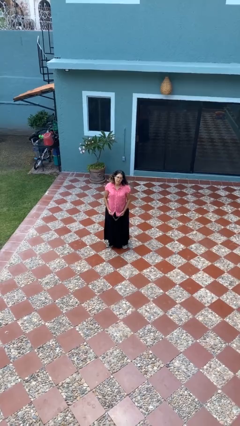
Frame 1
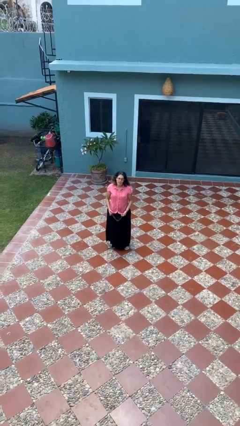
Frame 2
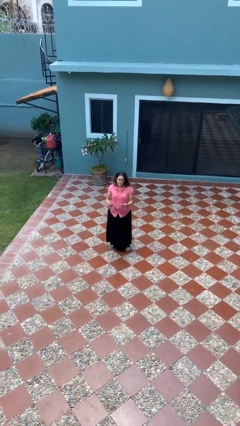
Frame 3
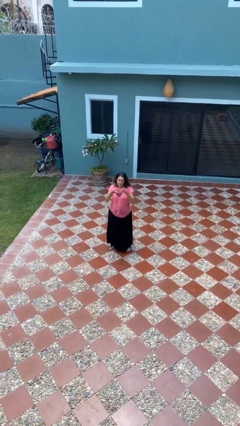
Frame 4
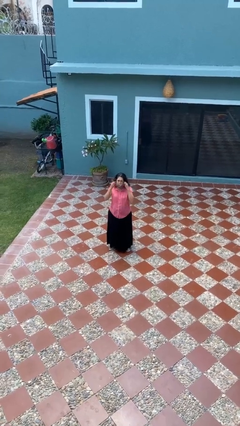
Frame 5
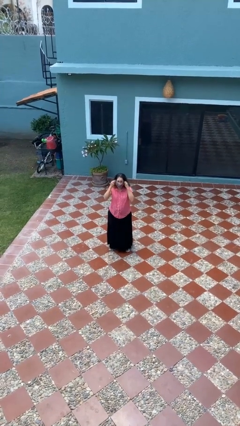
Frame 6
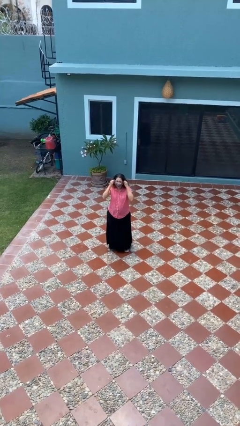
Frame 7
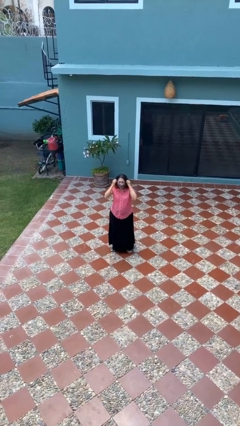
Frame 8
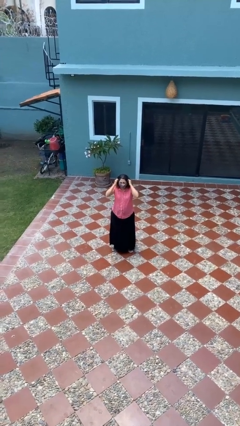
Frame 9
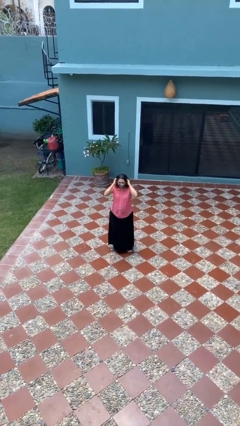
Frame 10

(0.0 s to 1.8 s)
person puts on facemask

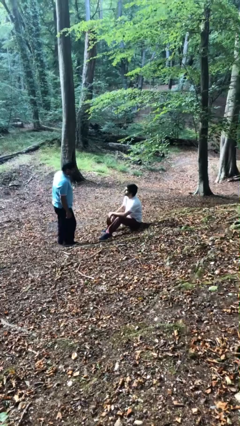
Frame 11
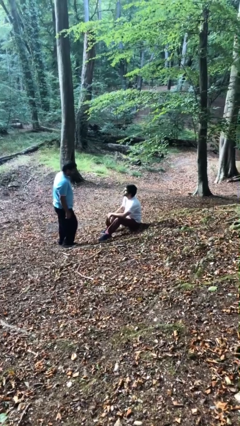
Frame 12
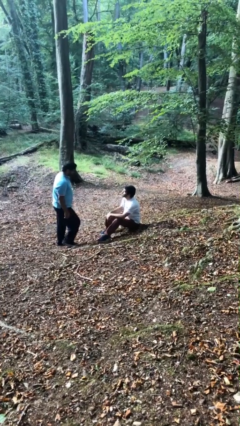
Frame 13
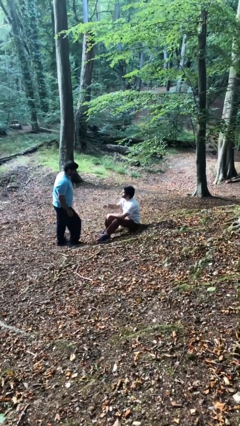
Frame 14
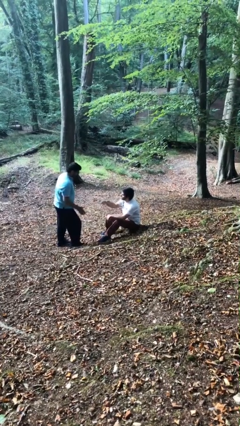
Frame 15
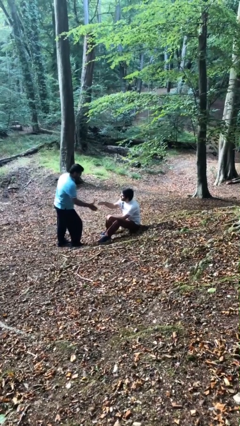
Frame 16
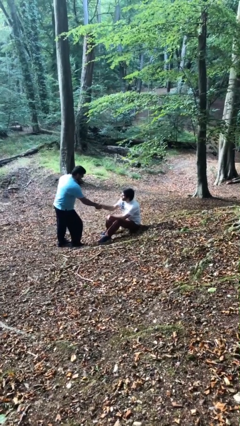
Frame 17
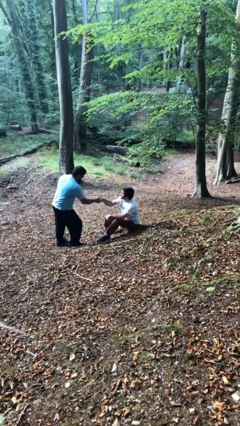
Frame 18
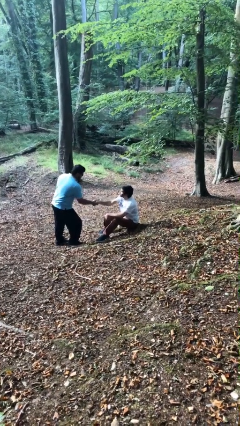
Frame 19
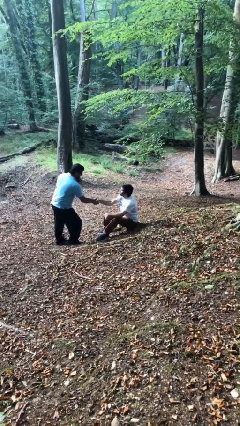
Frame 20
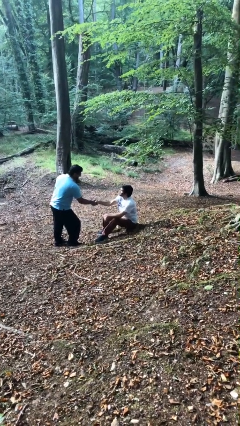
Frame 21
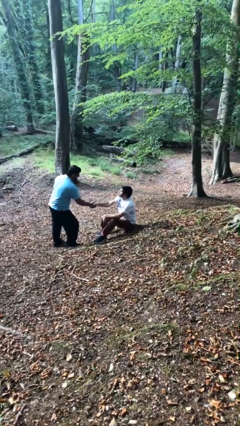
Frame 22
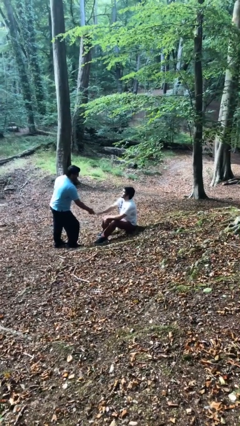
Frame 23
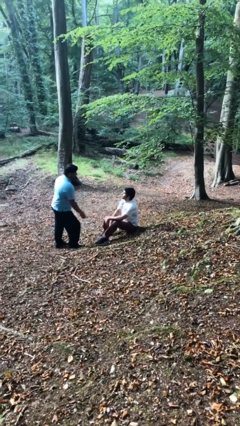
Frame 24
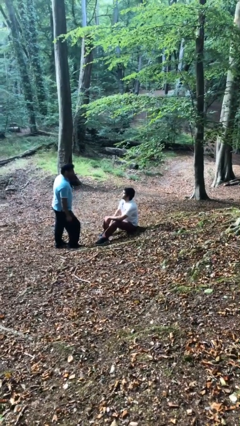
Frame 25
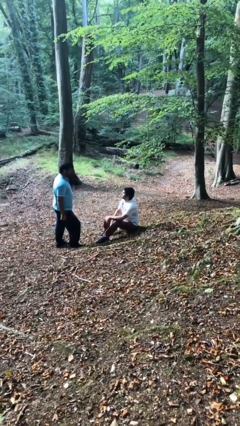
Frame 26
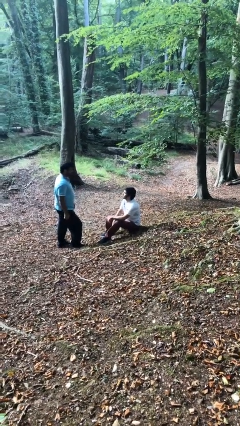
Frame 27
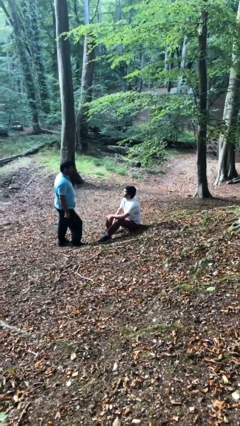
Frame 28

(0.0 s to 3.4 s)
person shakes hand

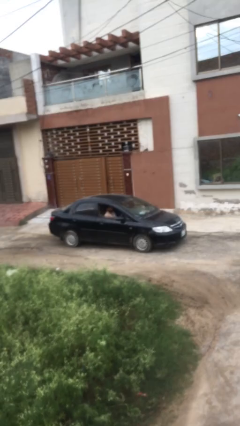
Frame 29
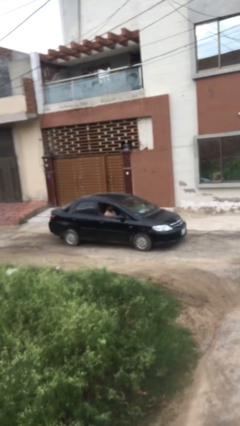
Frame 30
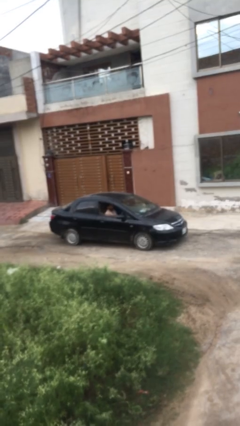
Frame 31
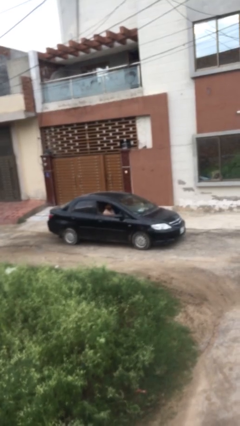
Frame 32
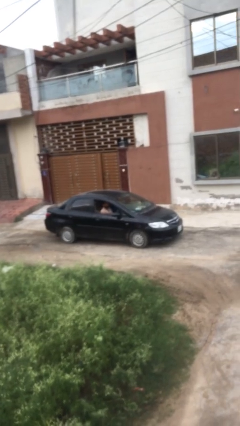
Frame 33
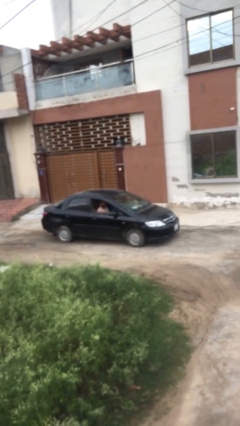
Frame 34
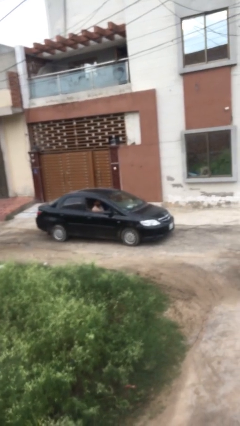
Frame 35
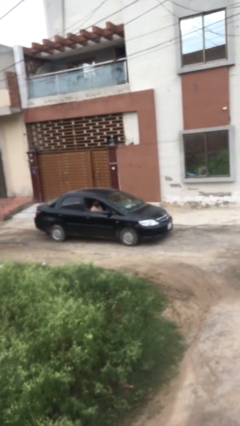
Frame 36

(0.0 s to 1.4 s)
car picks up person

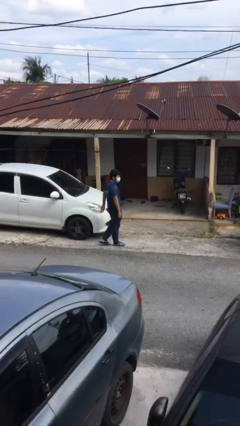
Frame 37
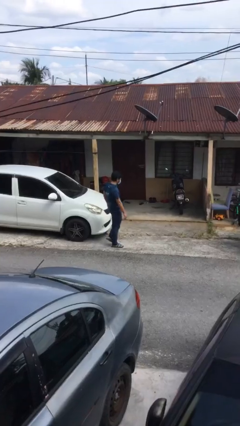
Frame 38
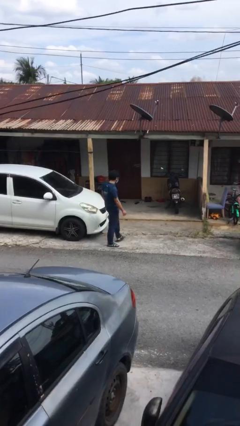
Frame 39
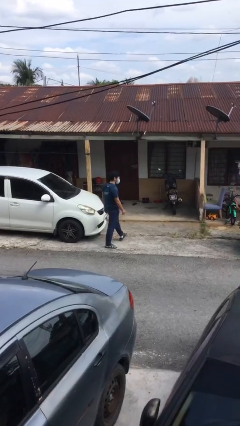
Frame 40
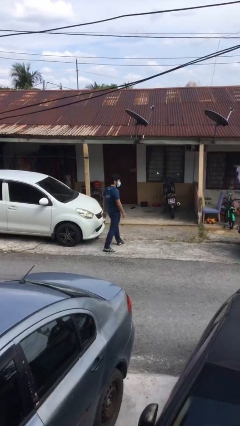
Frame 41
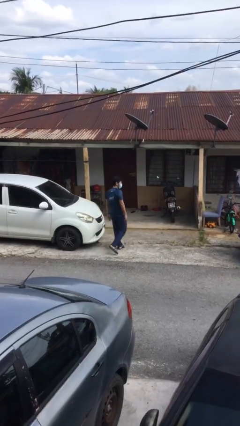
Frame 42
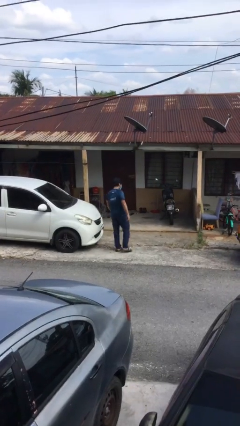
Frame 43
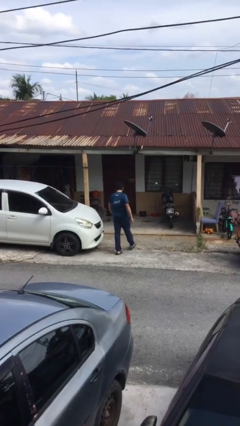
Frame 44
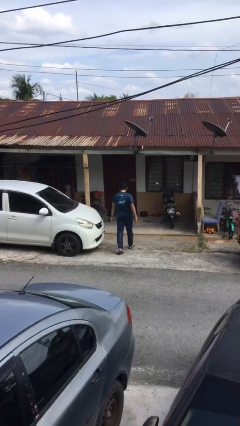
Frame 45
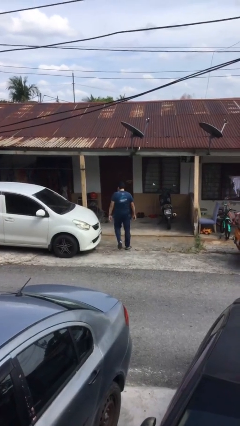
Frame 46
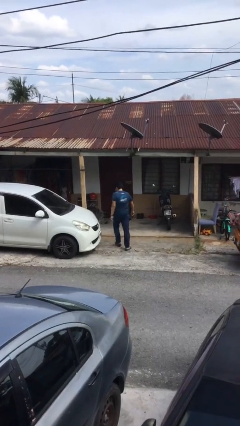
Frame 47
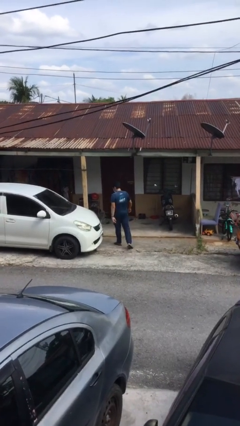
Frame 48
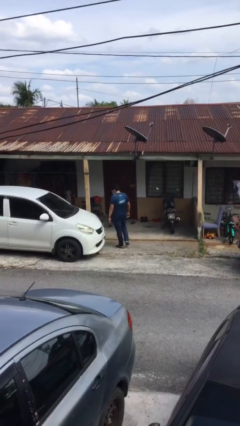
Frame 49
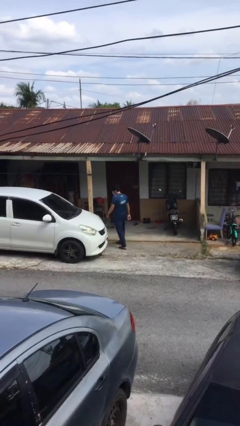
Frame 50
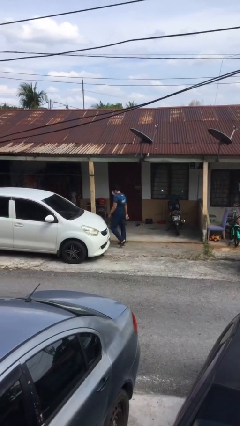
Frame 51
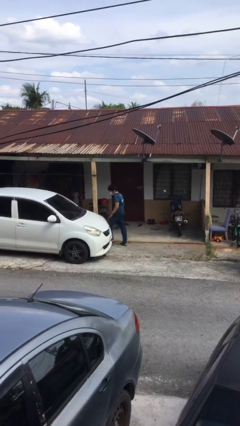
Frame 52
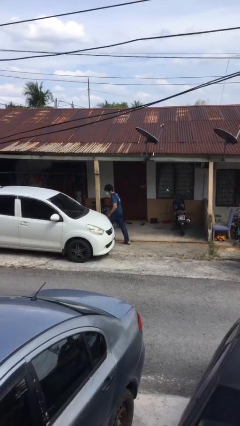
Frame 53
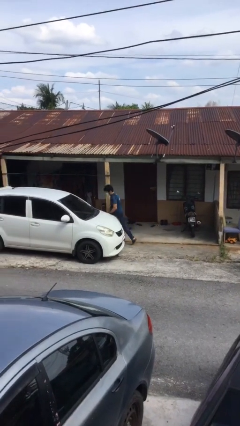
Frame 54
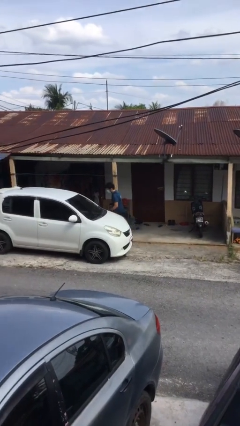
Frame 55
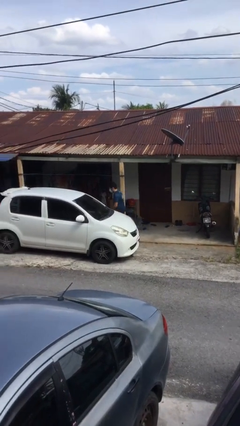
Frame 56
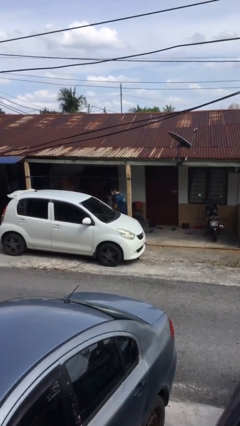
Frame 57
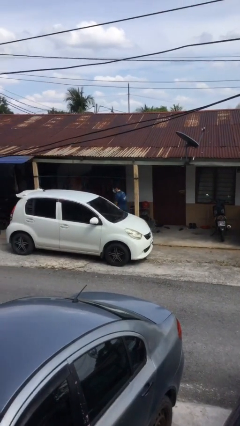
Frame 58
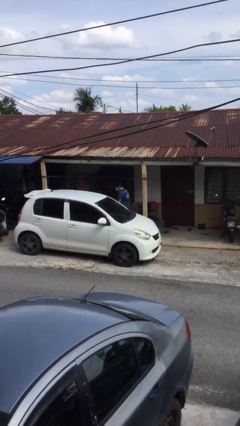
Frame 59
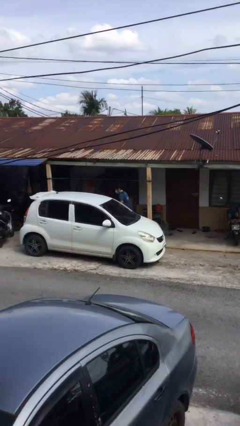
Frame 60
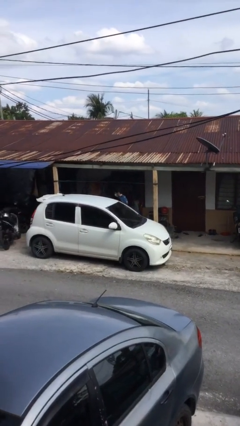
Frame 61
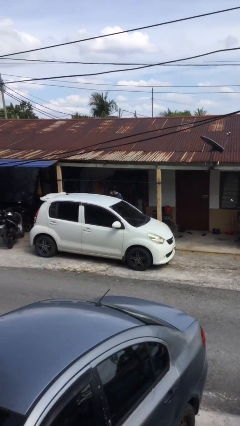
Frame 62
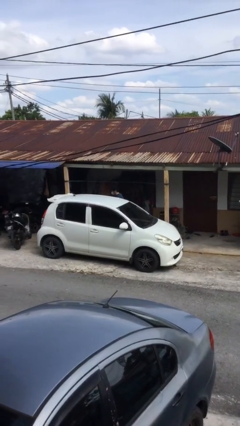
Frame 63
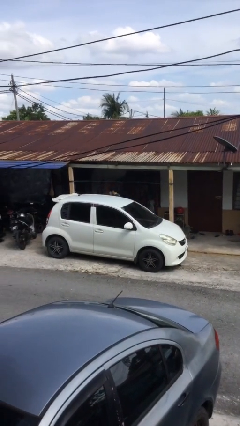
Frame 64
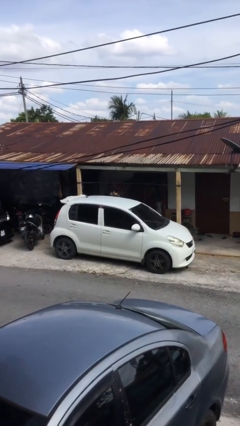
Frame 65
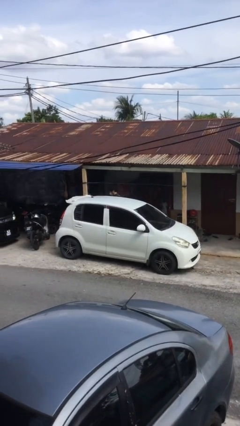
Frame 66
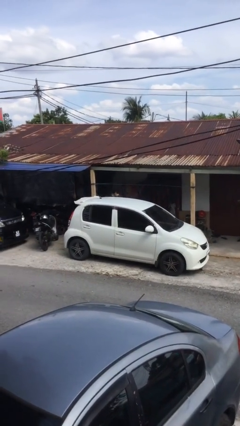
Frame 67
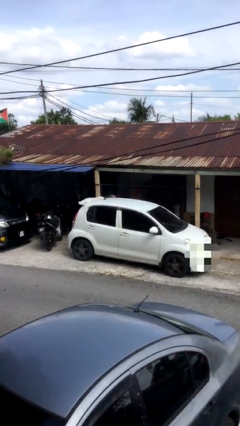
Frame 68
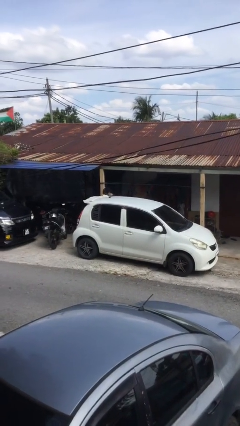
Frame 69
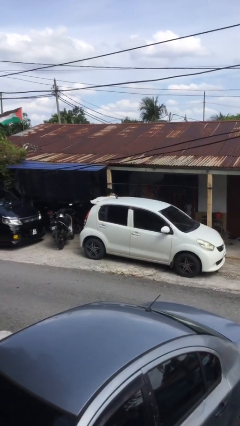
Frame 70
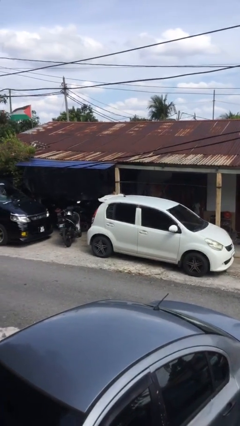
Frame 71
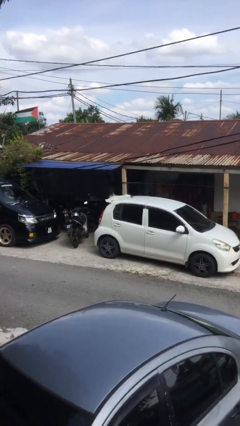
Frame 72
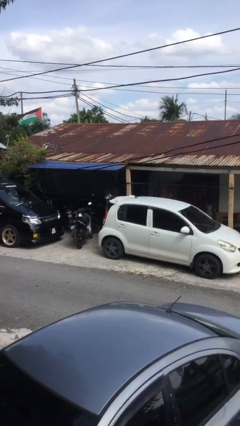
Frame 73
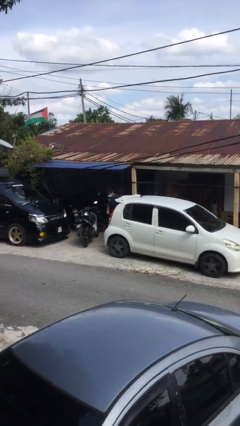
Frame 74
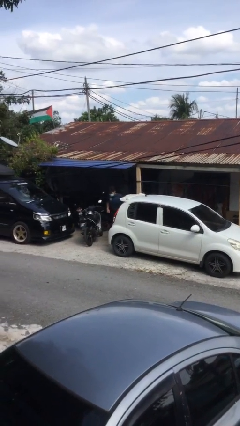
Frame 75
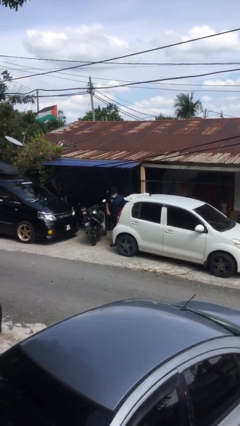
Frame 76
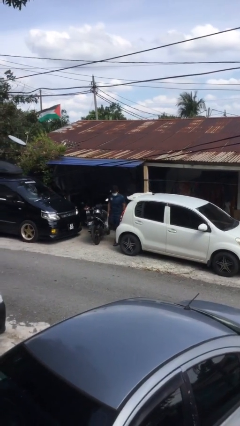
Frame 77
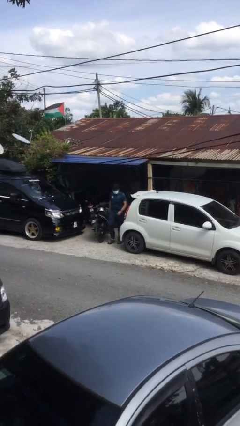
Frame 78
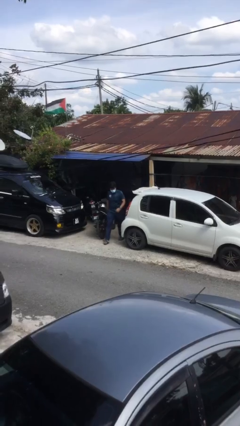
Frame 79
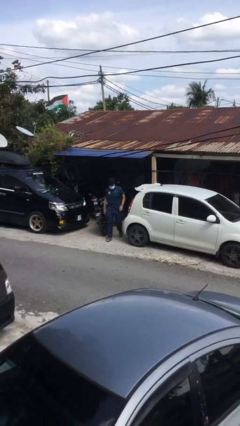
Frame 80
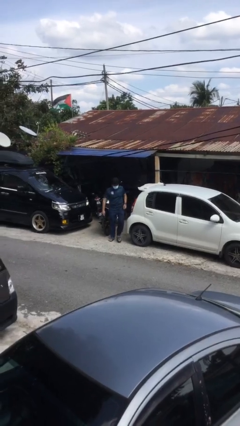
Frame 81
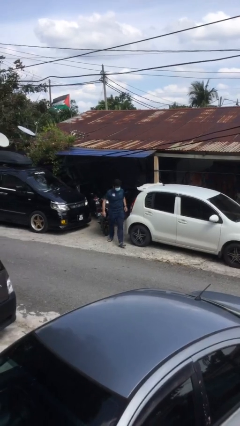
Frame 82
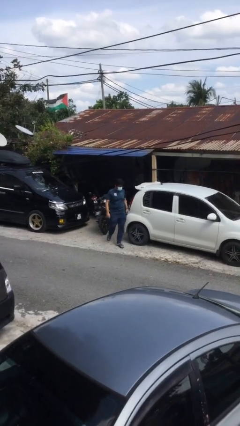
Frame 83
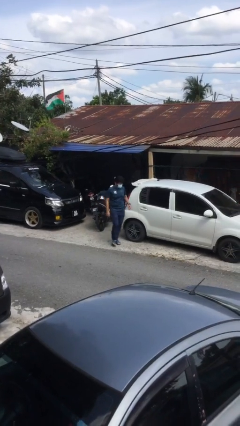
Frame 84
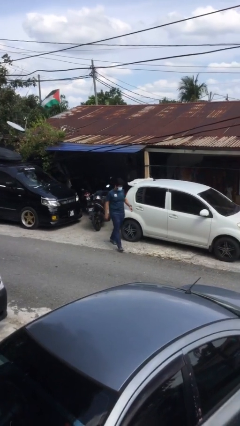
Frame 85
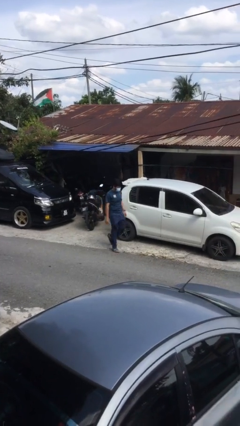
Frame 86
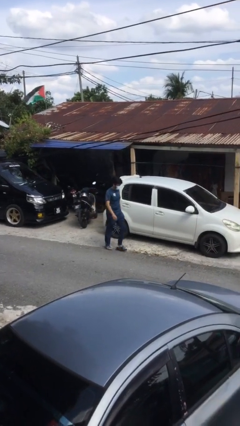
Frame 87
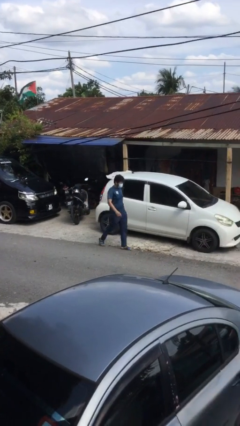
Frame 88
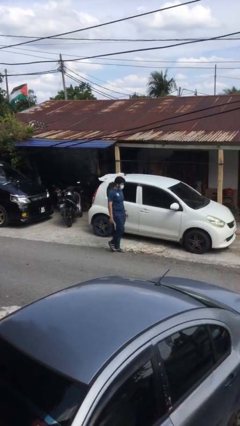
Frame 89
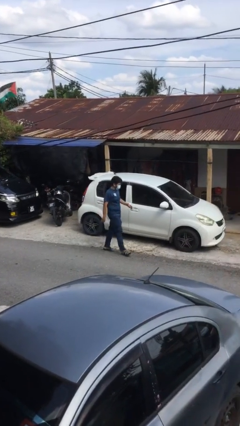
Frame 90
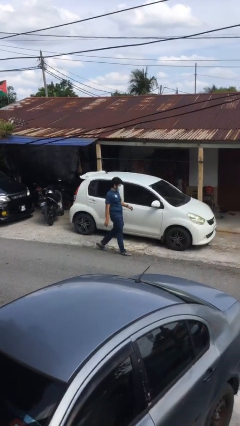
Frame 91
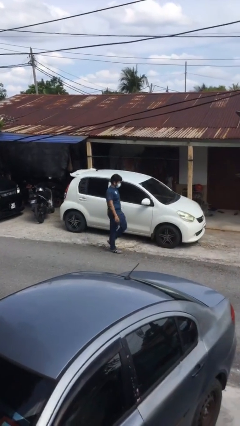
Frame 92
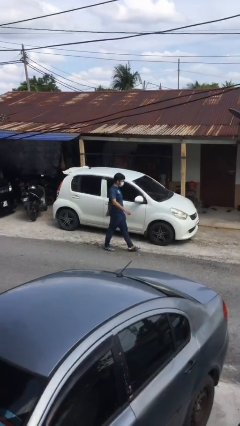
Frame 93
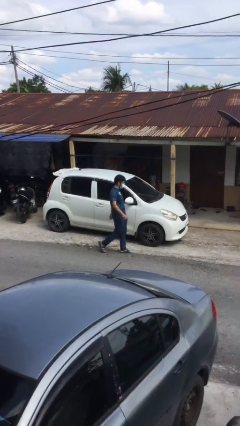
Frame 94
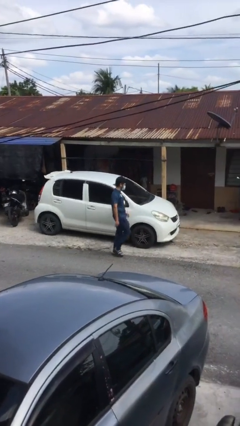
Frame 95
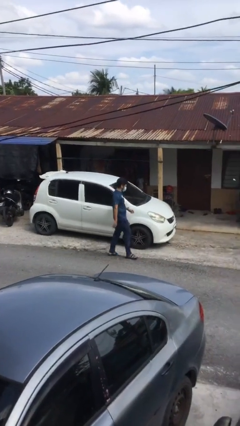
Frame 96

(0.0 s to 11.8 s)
person walks around car
